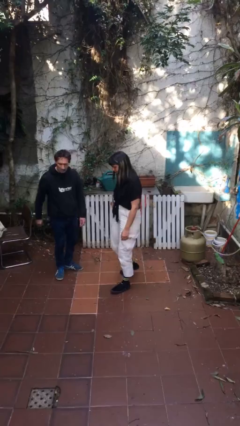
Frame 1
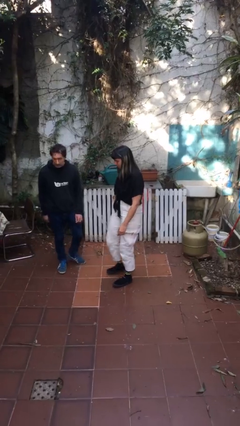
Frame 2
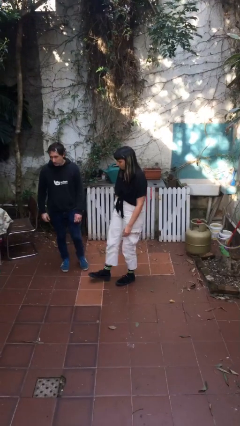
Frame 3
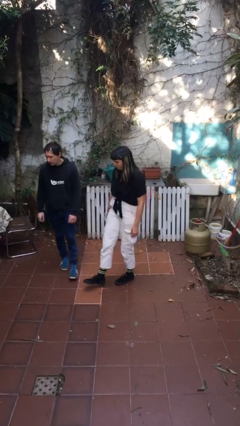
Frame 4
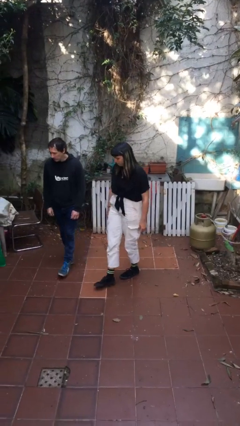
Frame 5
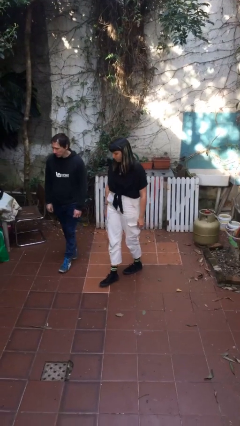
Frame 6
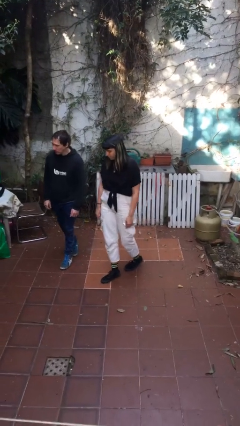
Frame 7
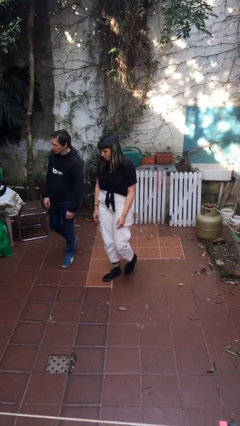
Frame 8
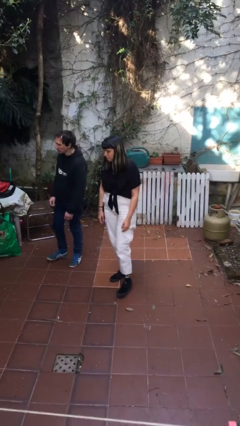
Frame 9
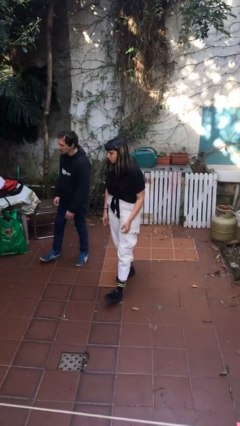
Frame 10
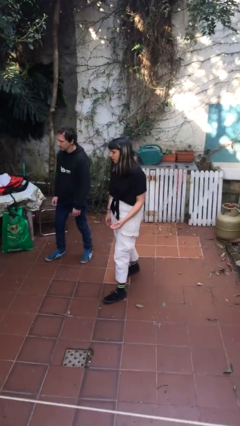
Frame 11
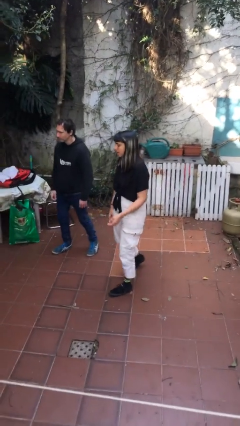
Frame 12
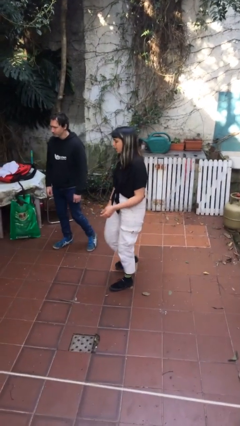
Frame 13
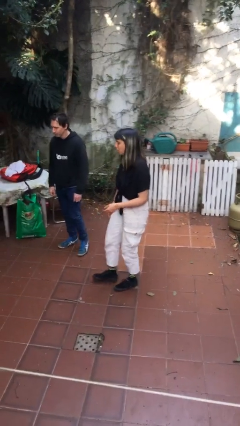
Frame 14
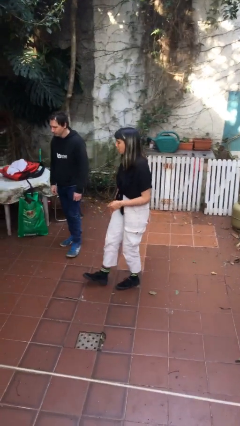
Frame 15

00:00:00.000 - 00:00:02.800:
person talks to person

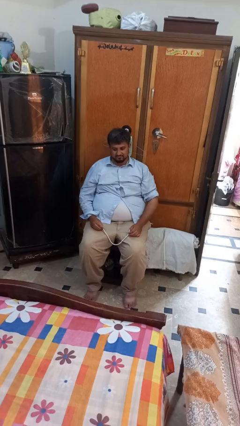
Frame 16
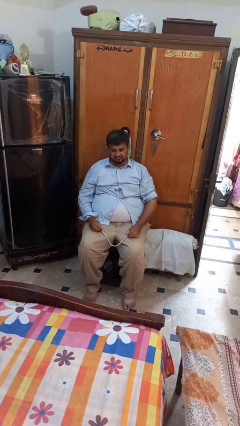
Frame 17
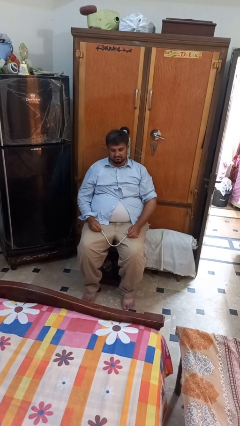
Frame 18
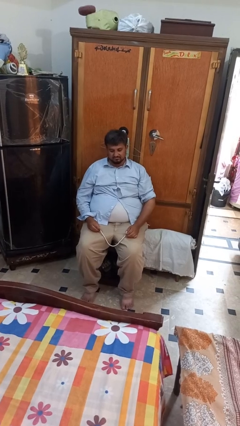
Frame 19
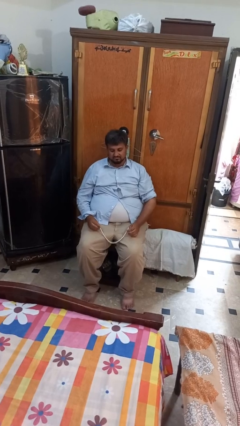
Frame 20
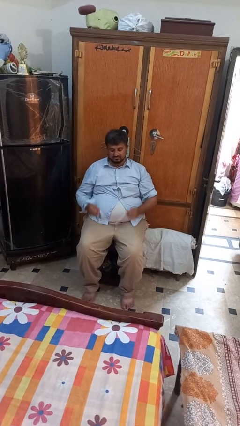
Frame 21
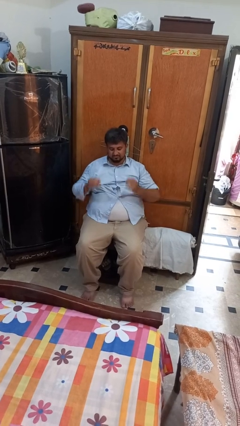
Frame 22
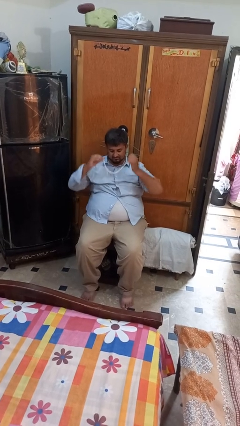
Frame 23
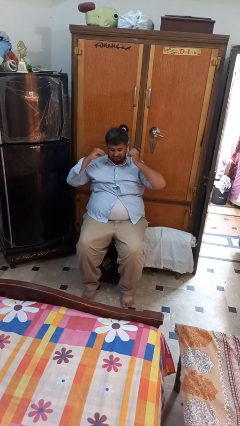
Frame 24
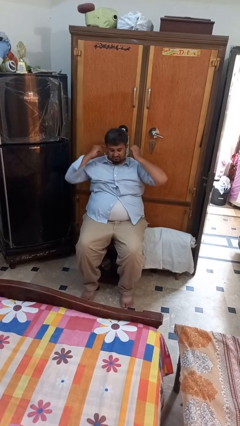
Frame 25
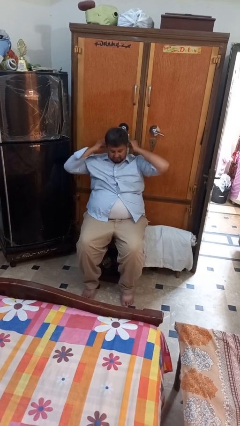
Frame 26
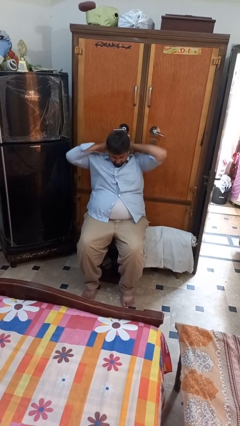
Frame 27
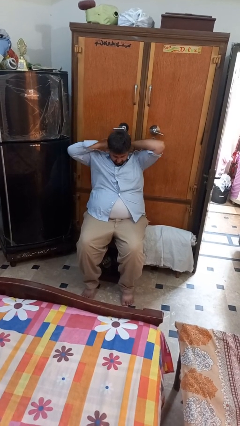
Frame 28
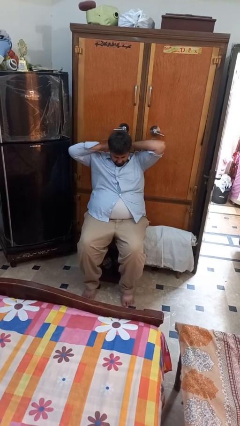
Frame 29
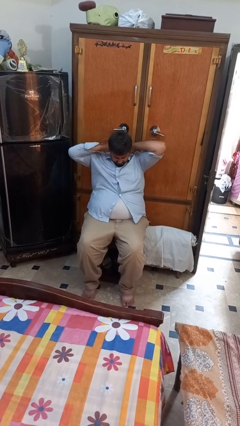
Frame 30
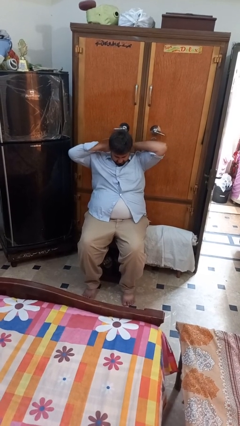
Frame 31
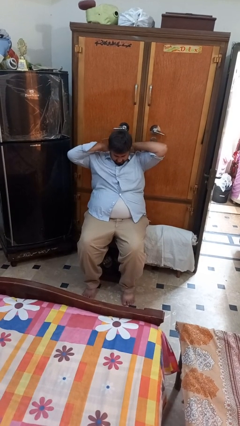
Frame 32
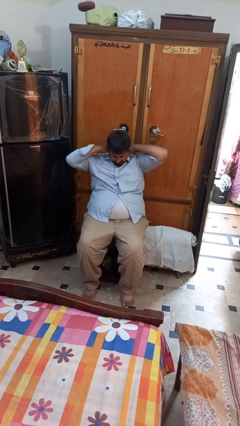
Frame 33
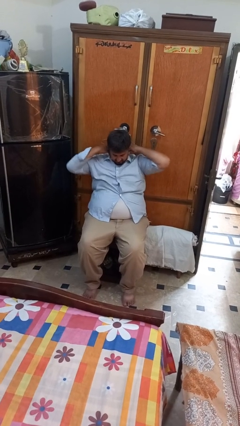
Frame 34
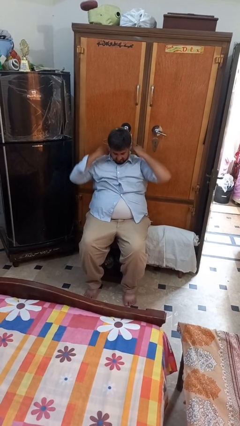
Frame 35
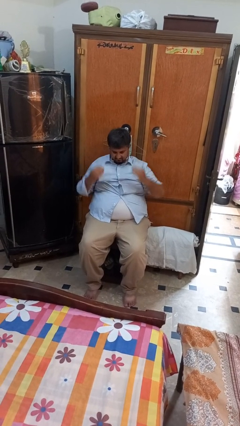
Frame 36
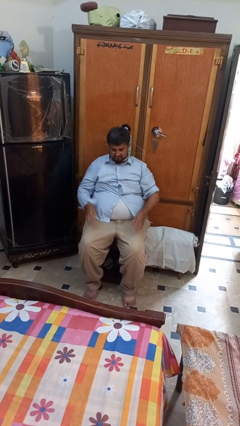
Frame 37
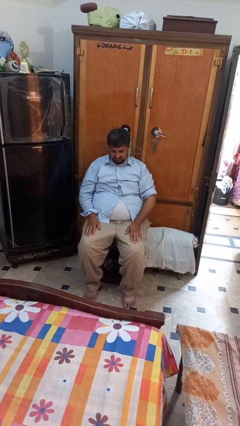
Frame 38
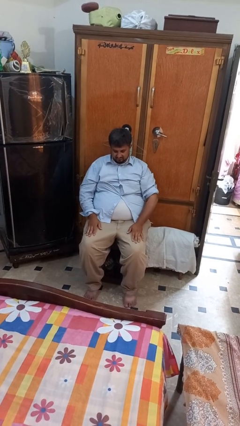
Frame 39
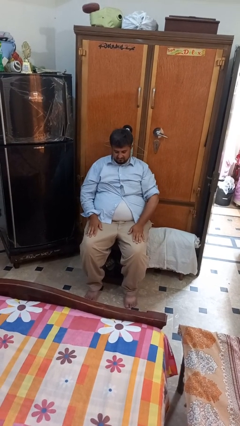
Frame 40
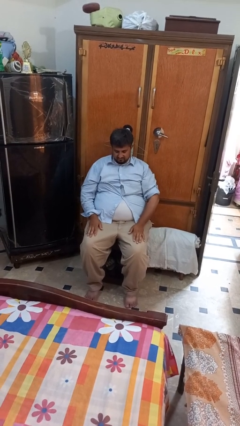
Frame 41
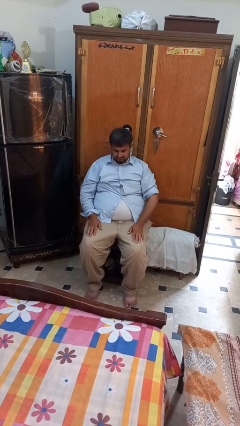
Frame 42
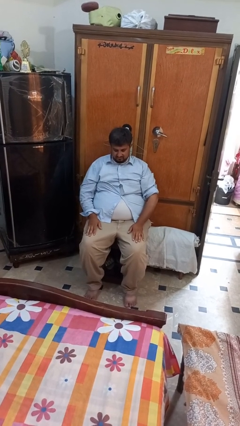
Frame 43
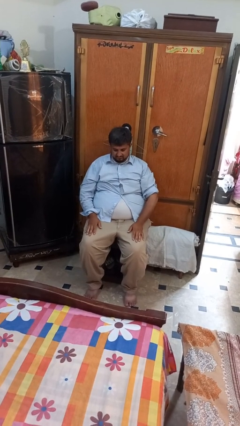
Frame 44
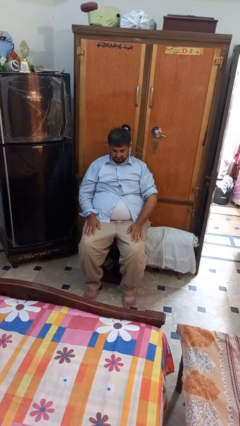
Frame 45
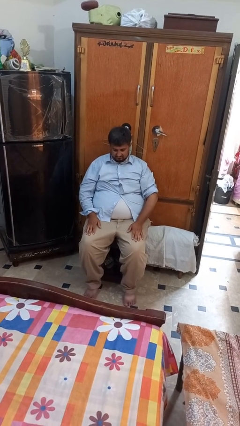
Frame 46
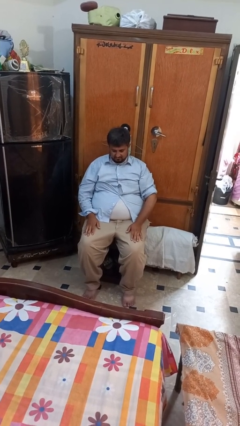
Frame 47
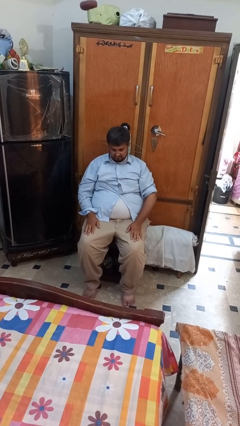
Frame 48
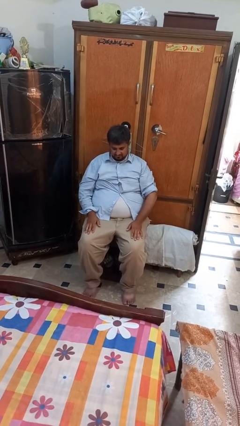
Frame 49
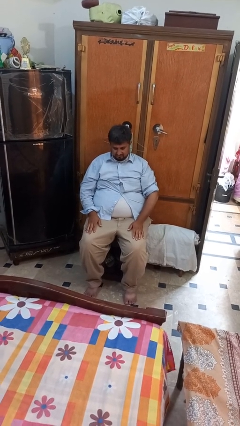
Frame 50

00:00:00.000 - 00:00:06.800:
person puts on necklace

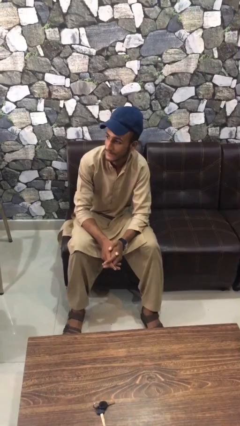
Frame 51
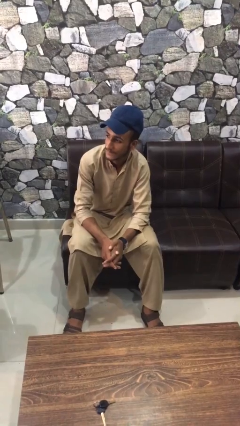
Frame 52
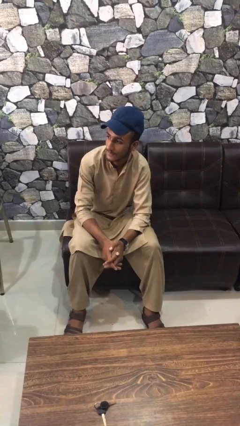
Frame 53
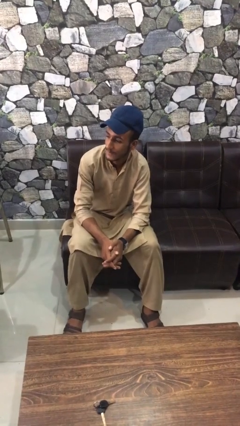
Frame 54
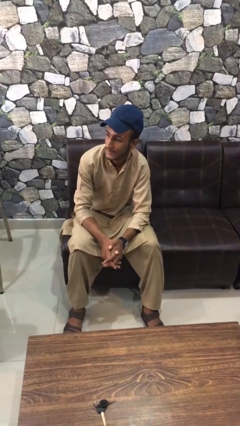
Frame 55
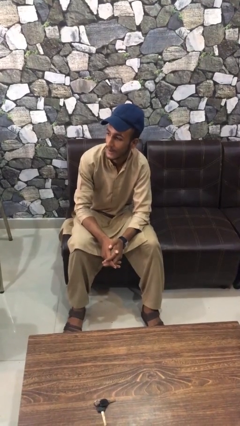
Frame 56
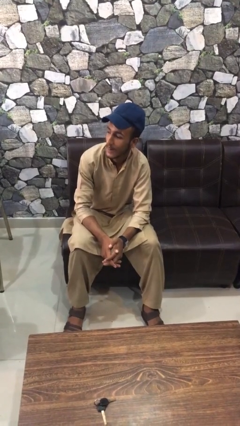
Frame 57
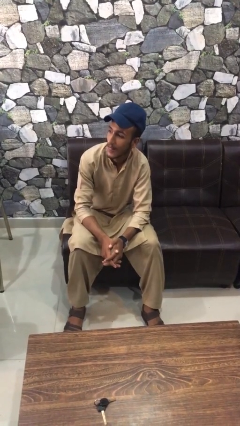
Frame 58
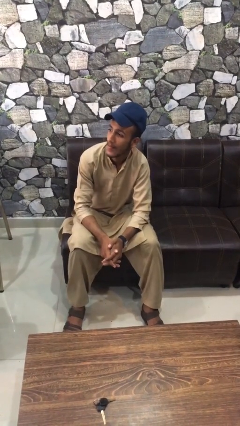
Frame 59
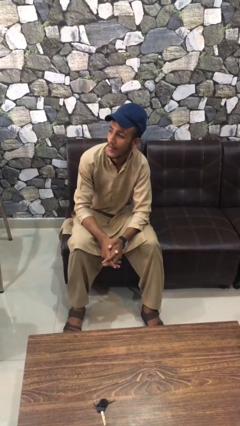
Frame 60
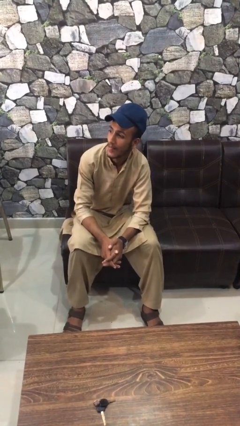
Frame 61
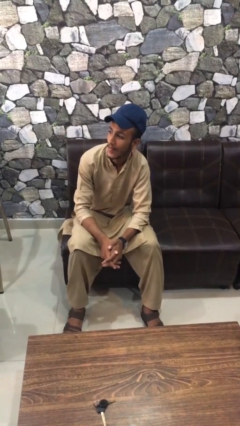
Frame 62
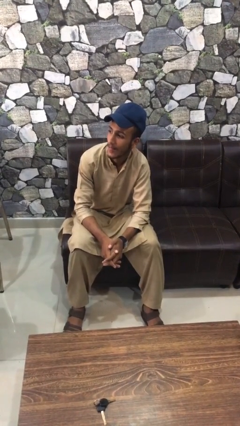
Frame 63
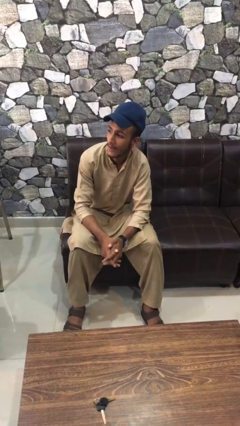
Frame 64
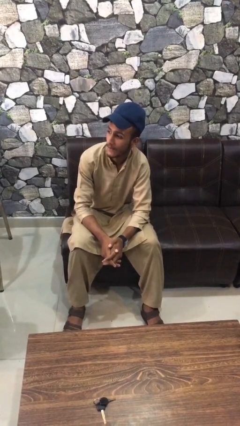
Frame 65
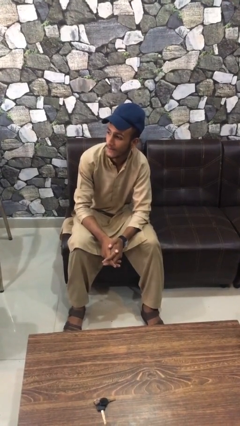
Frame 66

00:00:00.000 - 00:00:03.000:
person sticks out tongue

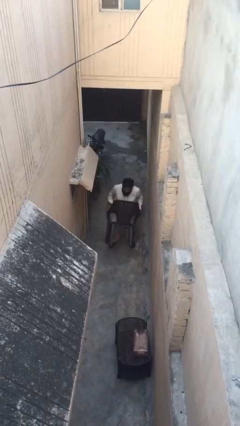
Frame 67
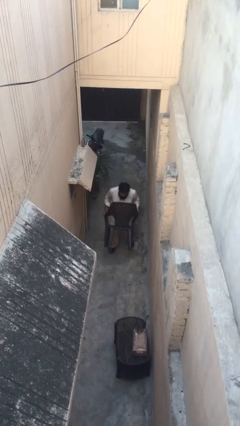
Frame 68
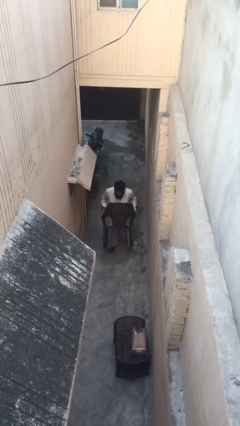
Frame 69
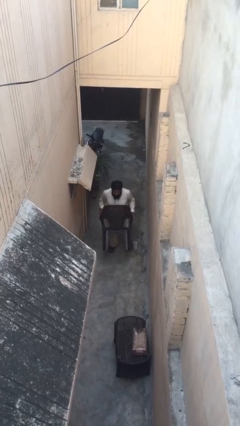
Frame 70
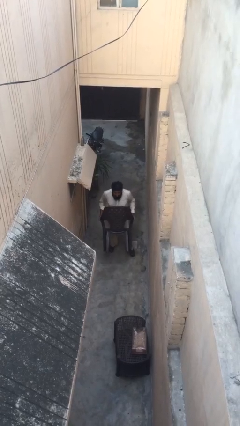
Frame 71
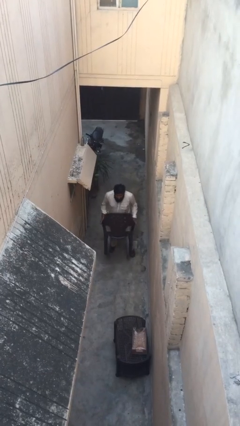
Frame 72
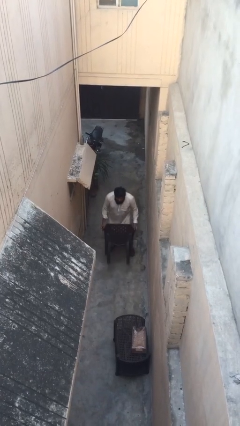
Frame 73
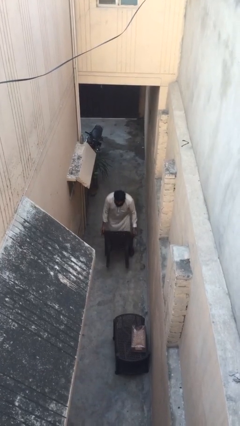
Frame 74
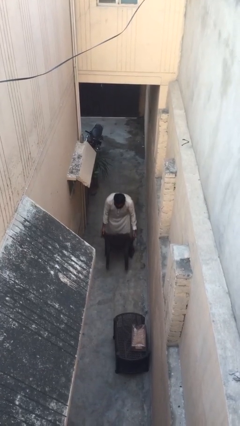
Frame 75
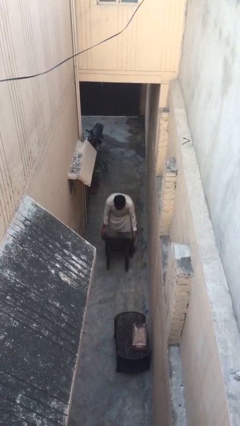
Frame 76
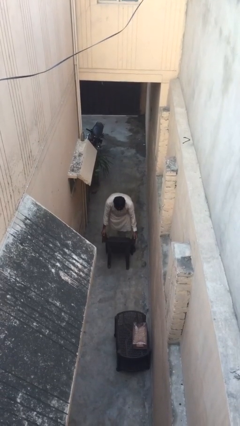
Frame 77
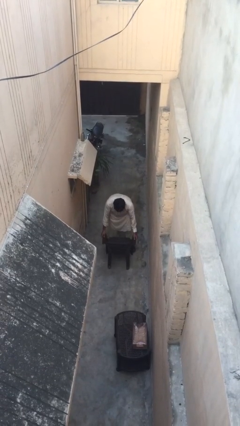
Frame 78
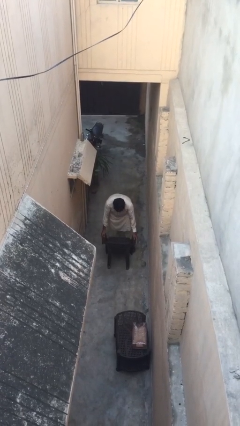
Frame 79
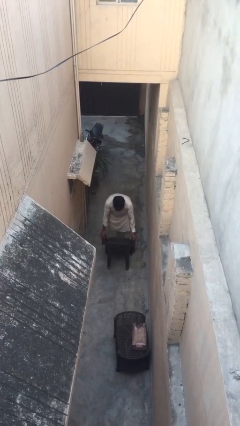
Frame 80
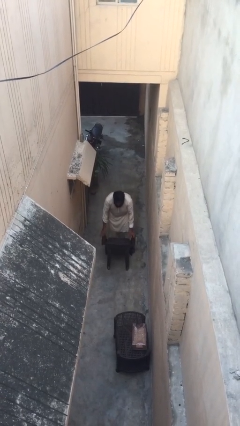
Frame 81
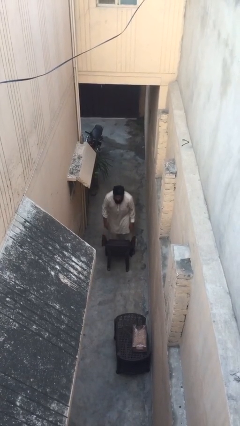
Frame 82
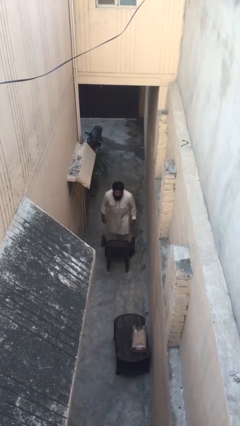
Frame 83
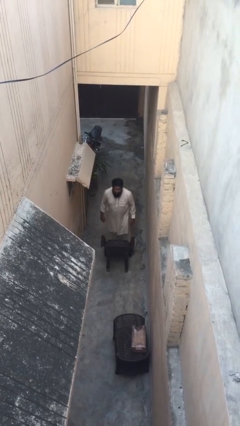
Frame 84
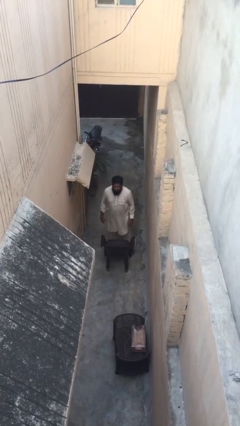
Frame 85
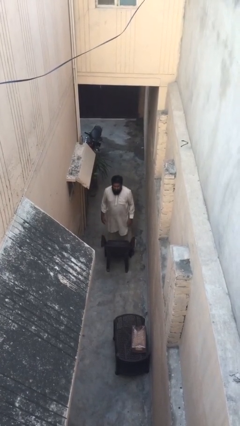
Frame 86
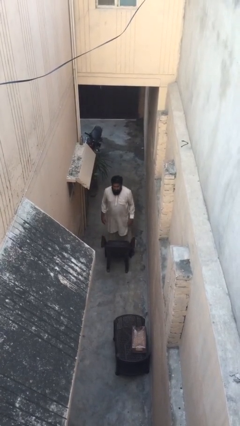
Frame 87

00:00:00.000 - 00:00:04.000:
person puts down object on floor

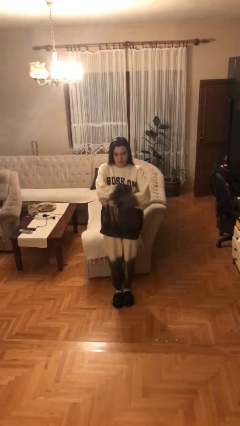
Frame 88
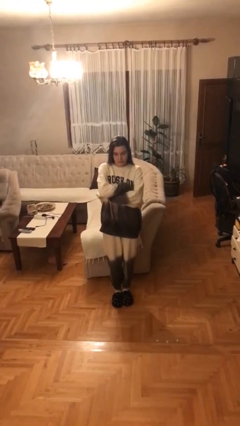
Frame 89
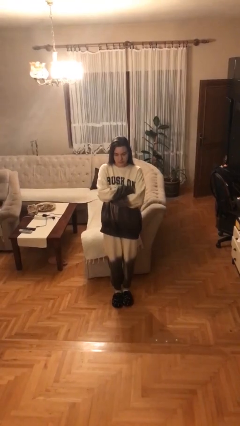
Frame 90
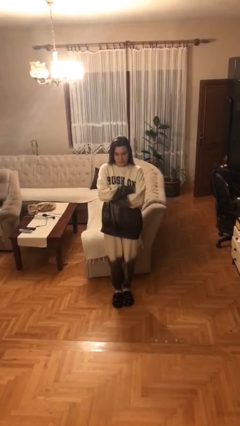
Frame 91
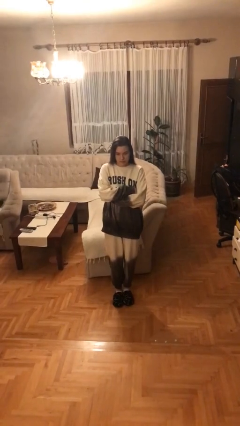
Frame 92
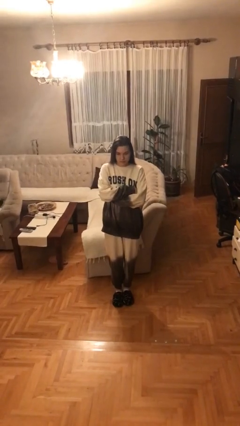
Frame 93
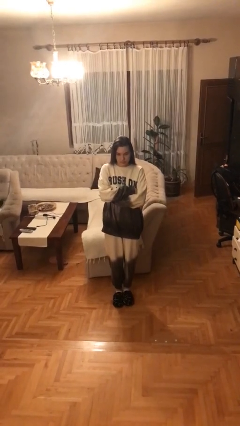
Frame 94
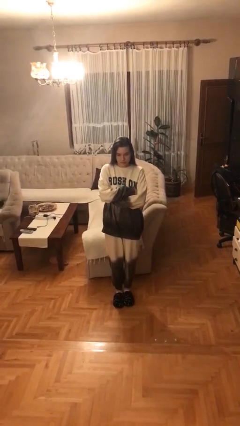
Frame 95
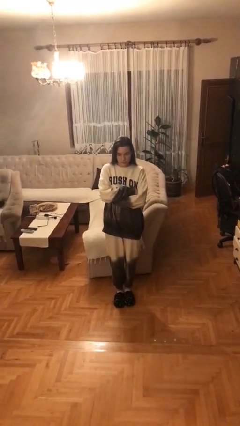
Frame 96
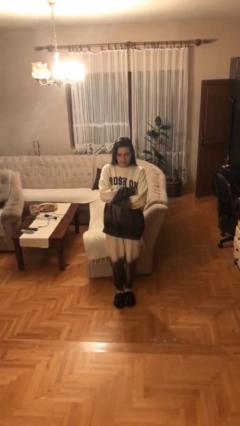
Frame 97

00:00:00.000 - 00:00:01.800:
person crosses arms
